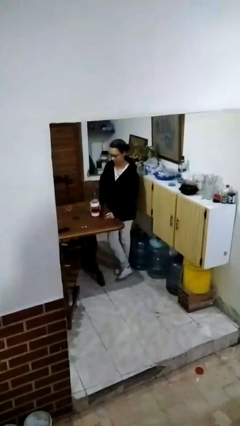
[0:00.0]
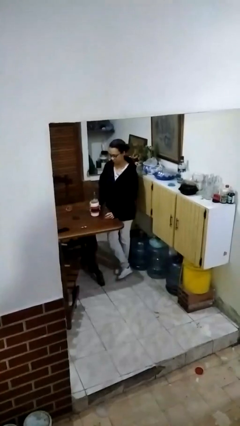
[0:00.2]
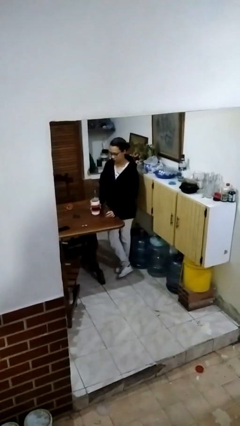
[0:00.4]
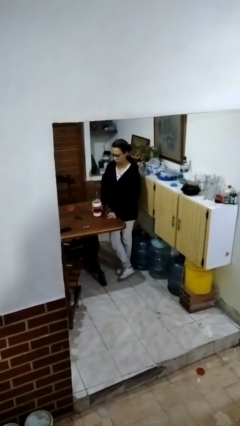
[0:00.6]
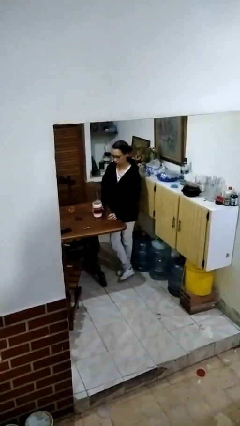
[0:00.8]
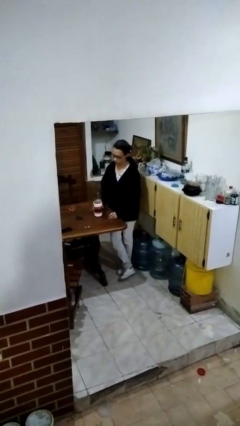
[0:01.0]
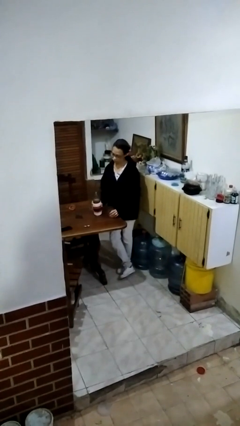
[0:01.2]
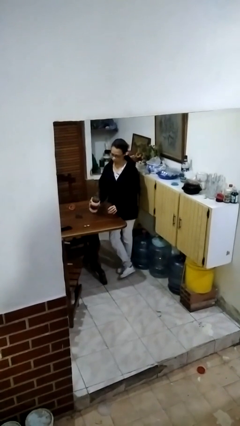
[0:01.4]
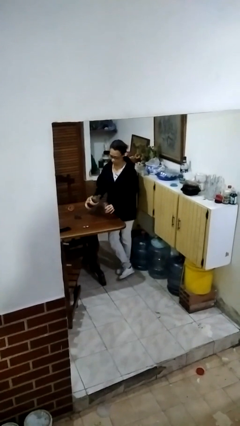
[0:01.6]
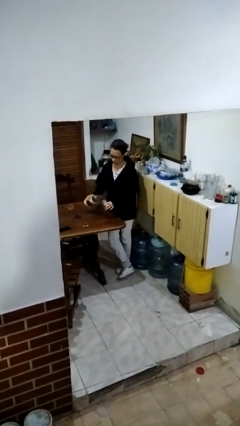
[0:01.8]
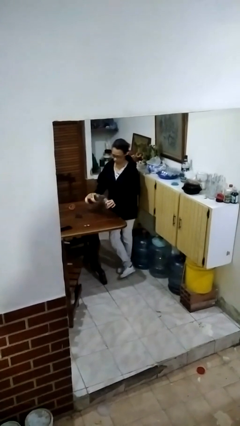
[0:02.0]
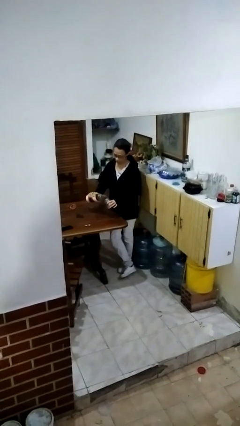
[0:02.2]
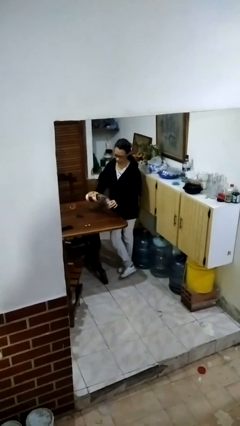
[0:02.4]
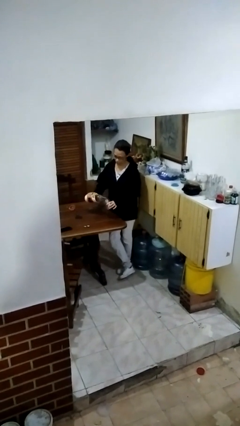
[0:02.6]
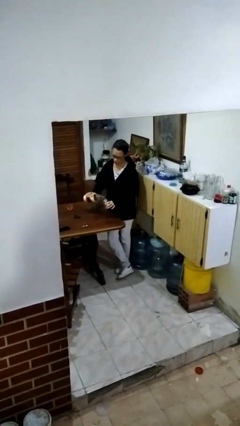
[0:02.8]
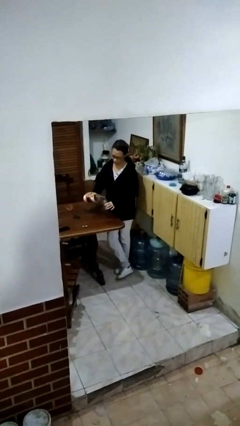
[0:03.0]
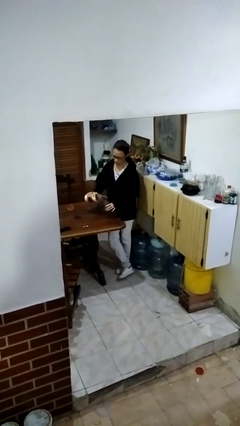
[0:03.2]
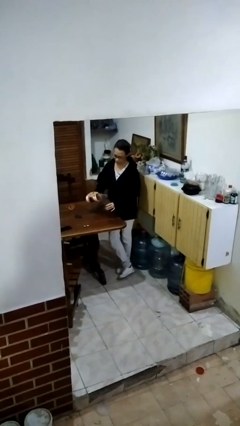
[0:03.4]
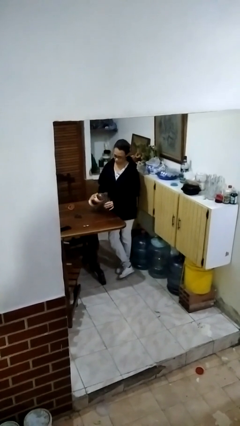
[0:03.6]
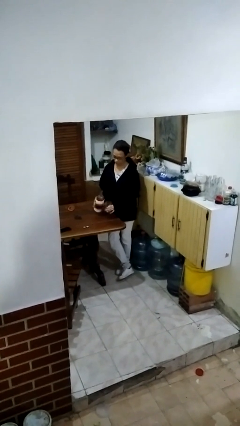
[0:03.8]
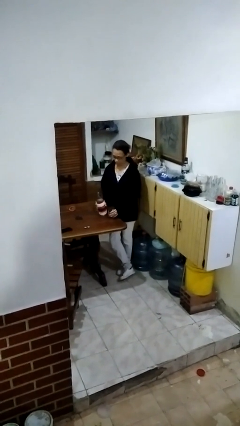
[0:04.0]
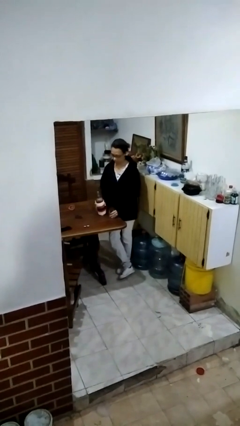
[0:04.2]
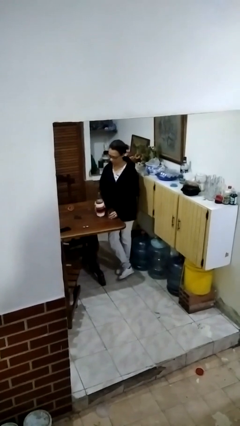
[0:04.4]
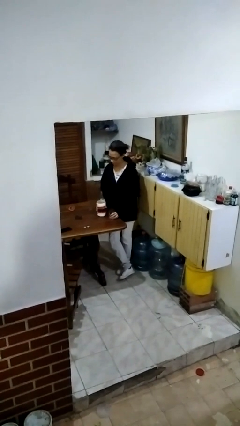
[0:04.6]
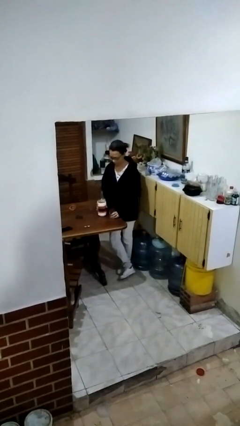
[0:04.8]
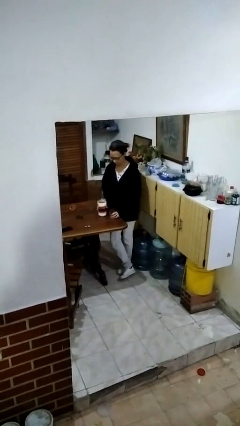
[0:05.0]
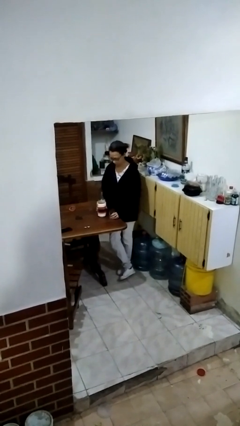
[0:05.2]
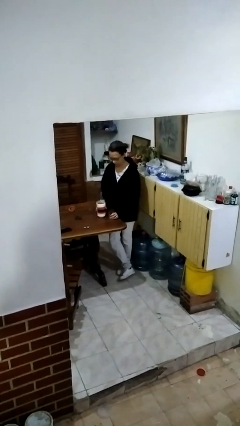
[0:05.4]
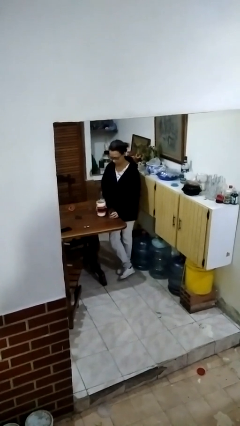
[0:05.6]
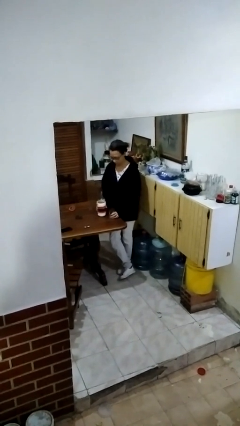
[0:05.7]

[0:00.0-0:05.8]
person pours liquid into cup

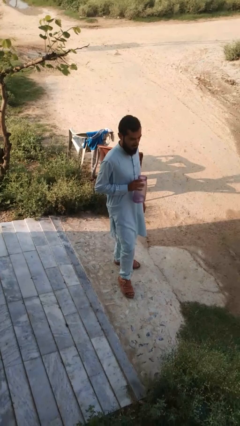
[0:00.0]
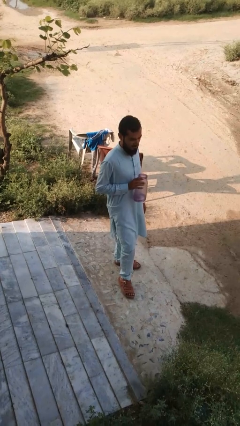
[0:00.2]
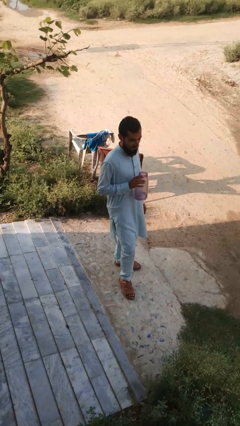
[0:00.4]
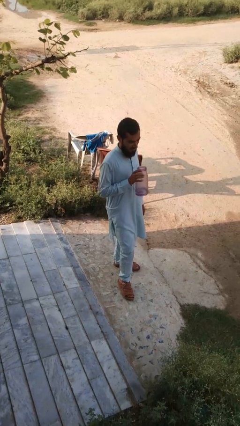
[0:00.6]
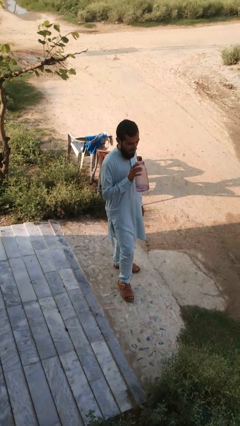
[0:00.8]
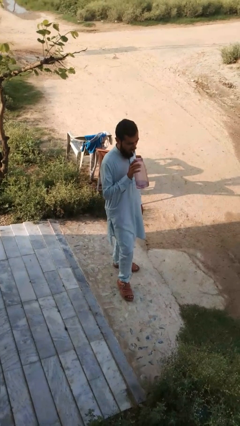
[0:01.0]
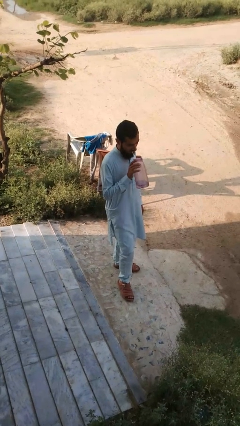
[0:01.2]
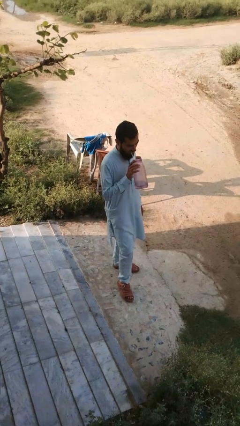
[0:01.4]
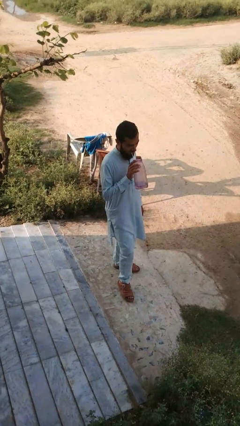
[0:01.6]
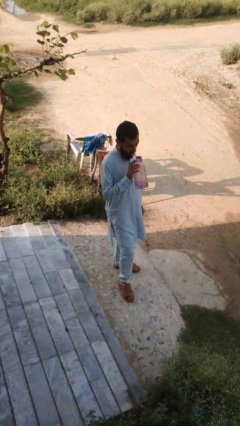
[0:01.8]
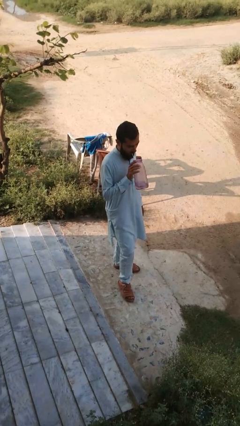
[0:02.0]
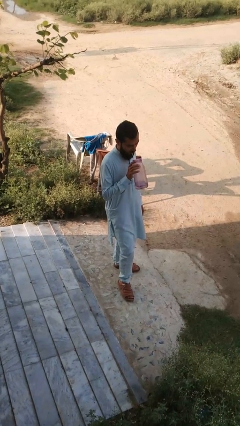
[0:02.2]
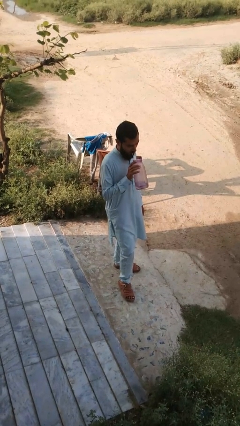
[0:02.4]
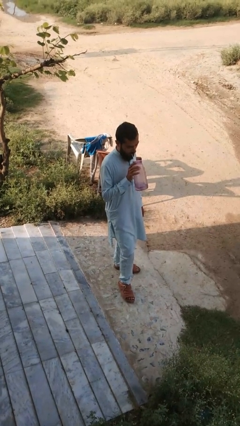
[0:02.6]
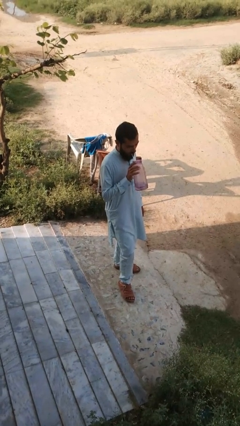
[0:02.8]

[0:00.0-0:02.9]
person drinks from straw

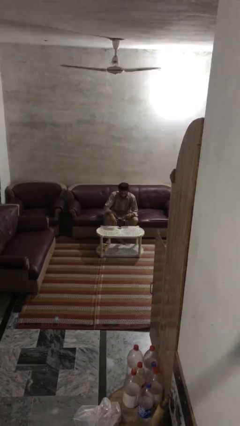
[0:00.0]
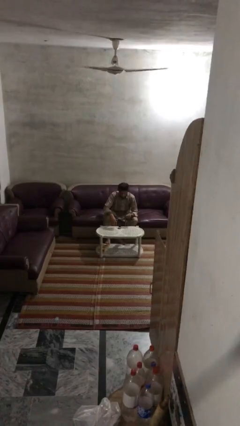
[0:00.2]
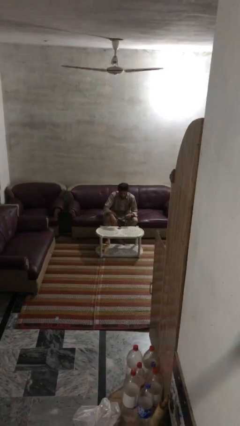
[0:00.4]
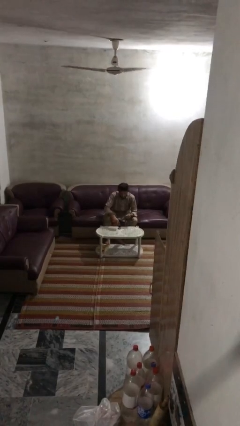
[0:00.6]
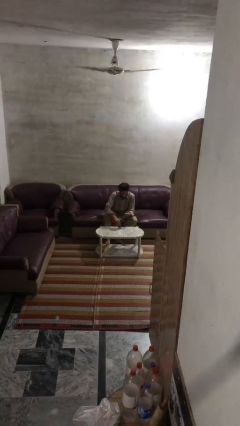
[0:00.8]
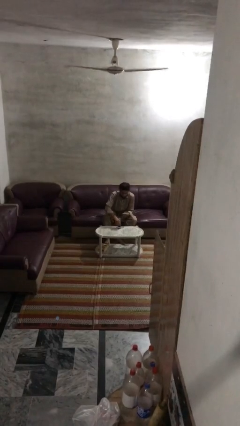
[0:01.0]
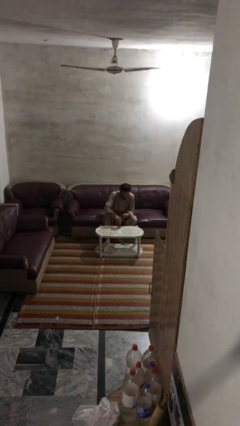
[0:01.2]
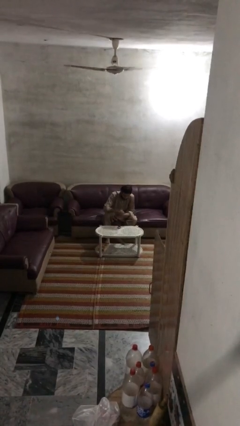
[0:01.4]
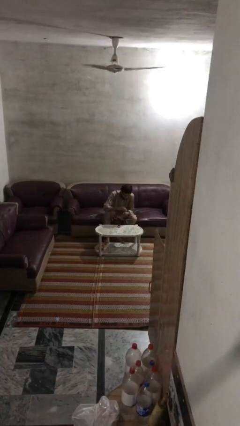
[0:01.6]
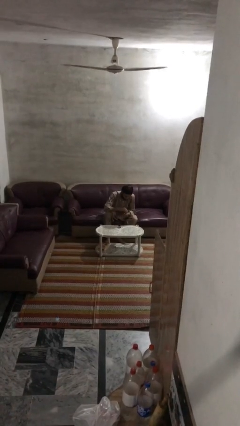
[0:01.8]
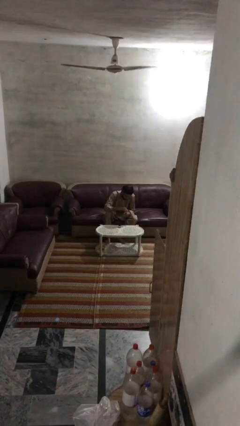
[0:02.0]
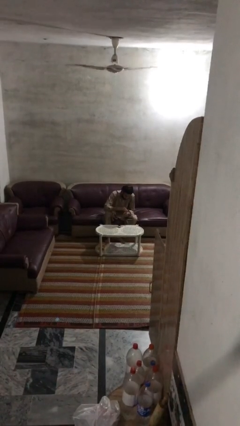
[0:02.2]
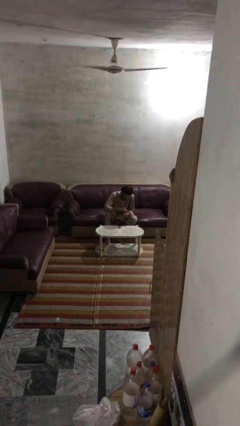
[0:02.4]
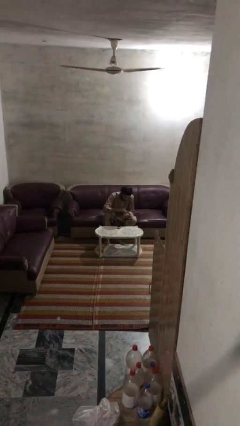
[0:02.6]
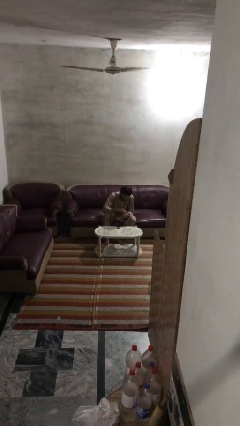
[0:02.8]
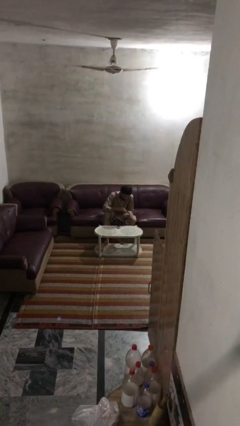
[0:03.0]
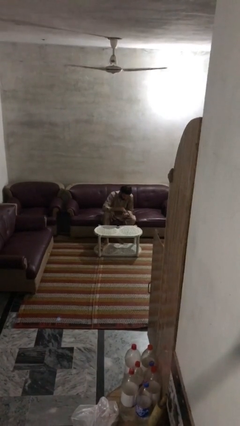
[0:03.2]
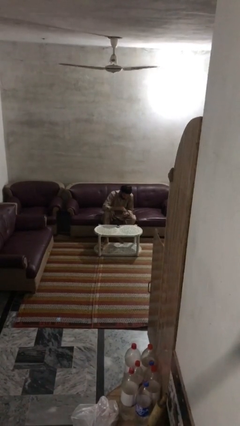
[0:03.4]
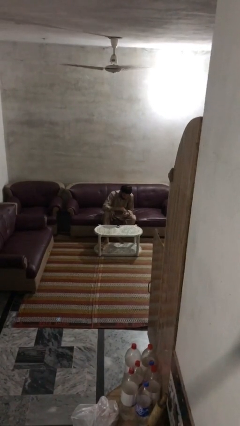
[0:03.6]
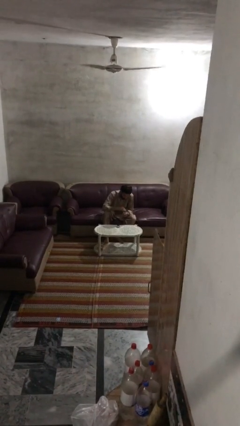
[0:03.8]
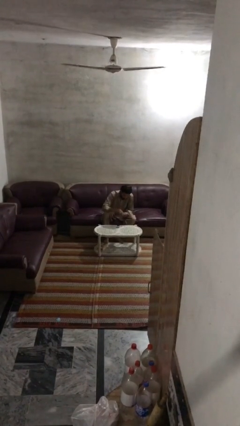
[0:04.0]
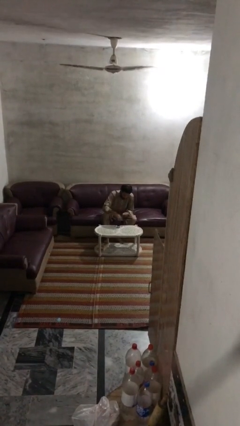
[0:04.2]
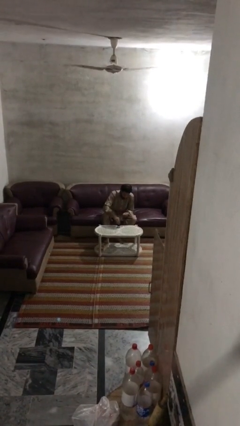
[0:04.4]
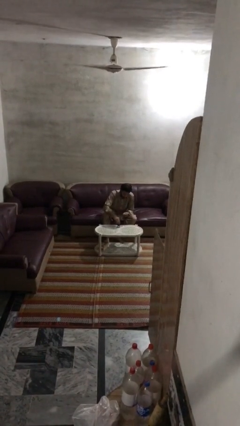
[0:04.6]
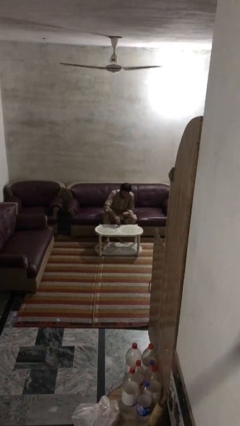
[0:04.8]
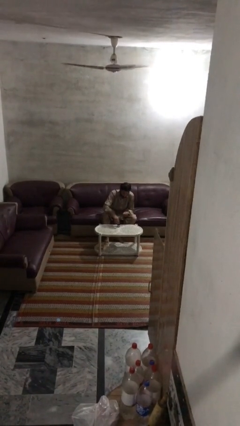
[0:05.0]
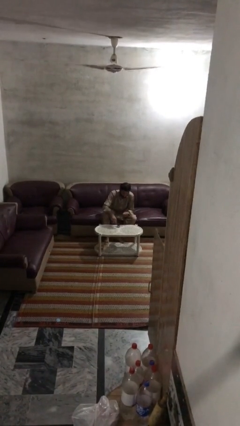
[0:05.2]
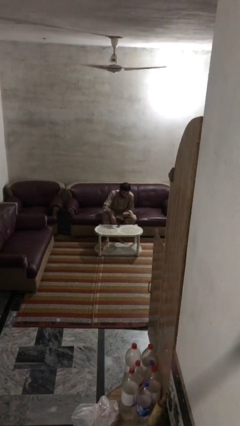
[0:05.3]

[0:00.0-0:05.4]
person paints fingernails

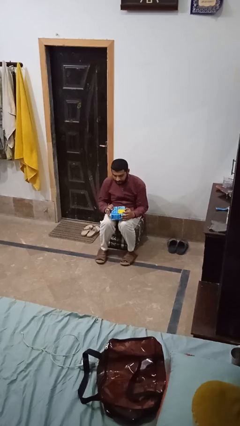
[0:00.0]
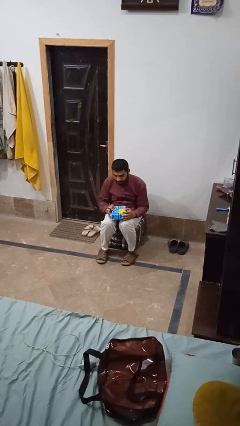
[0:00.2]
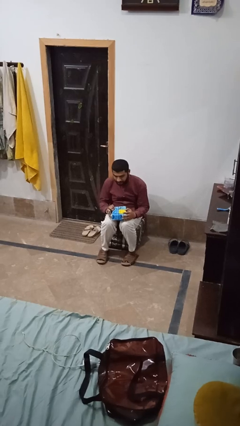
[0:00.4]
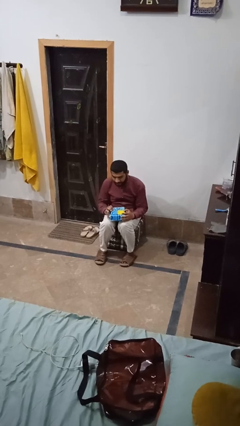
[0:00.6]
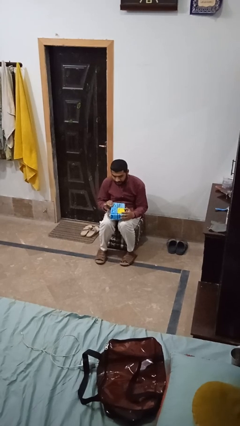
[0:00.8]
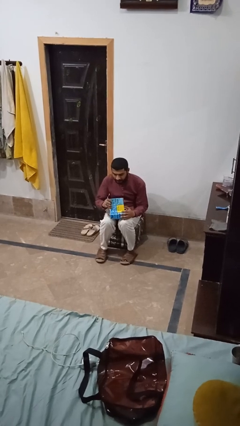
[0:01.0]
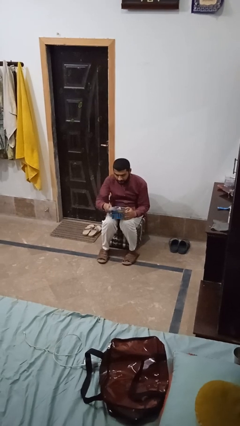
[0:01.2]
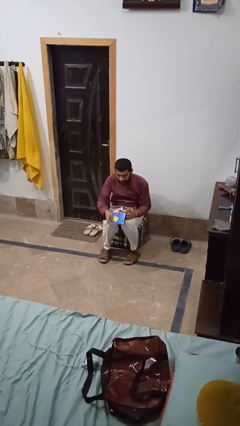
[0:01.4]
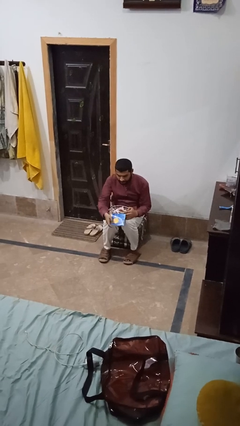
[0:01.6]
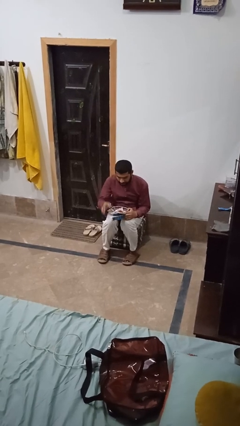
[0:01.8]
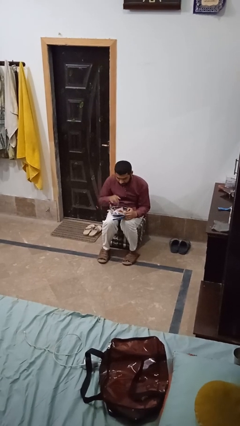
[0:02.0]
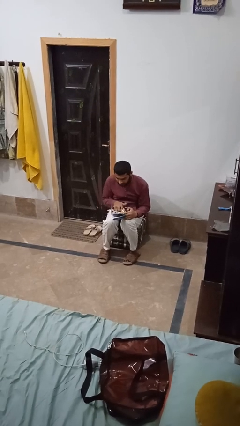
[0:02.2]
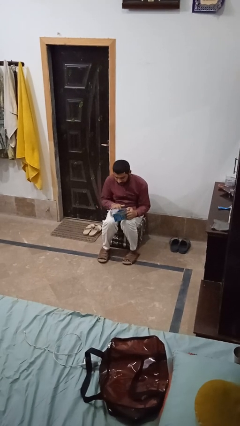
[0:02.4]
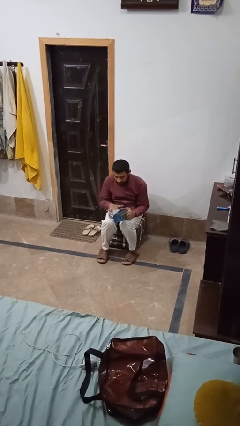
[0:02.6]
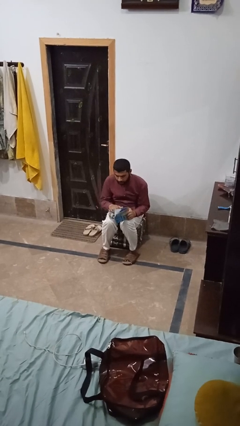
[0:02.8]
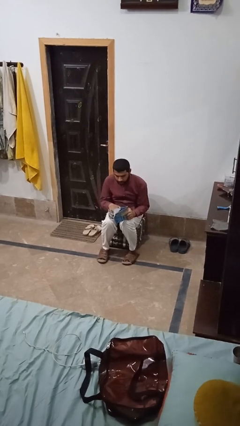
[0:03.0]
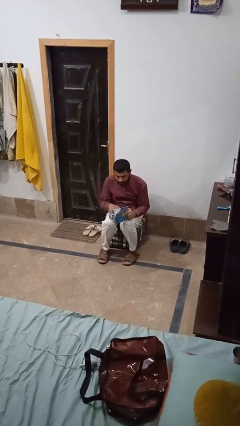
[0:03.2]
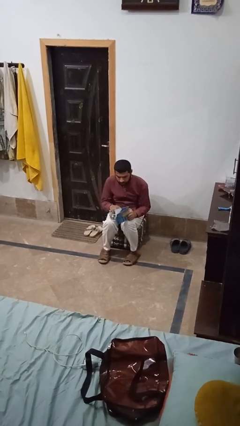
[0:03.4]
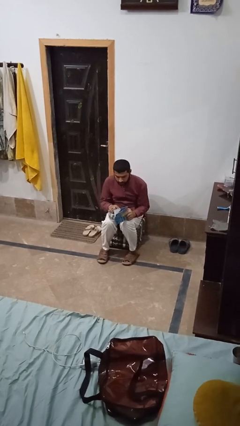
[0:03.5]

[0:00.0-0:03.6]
person opens jewelry box

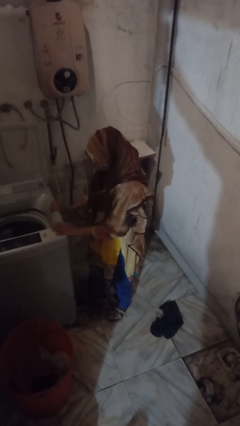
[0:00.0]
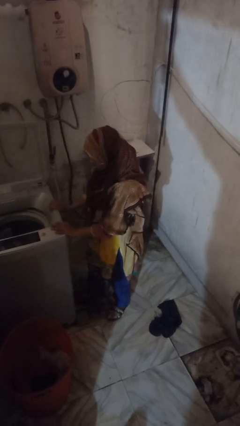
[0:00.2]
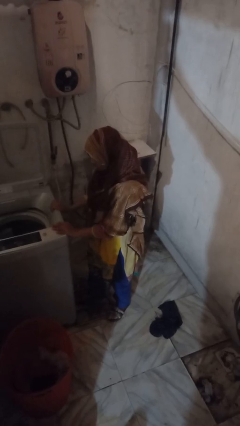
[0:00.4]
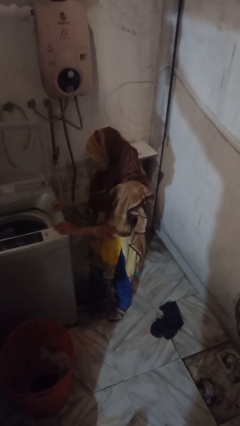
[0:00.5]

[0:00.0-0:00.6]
person unloads dryer
